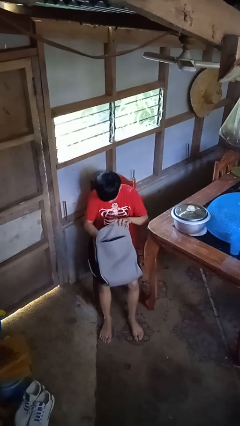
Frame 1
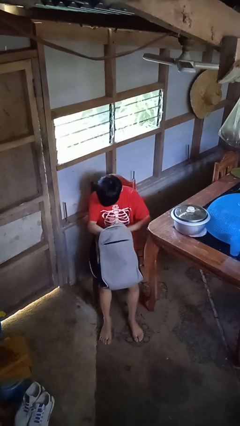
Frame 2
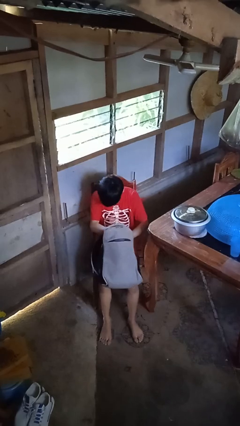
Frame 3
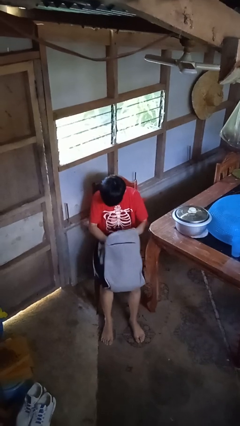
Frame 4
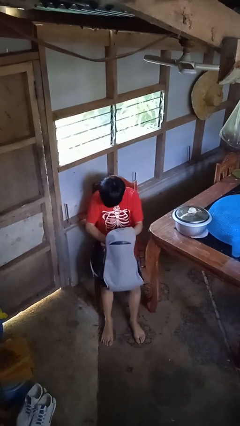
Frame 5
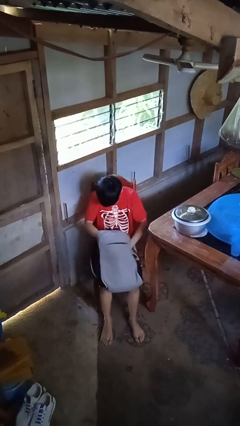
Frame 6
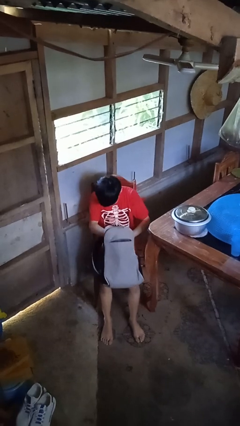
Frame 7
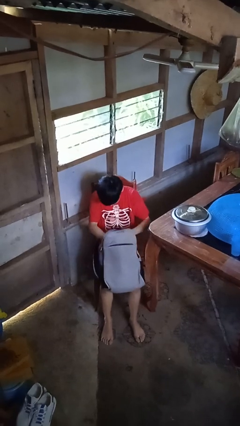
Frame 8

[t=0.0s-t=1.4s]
person searches in backpack

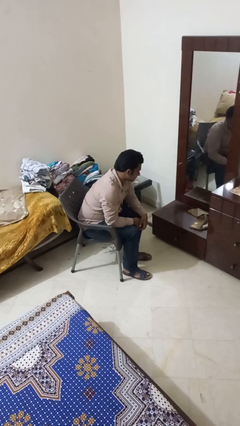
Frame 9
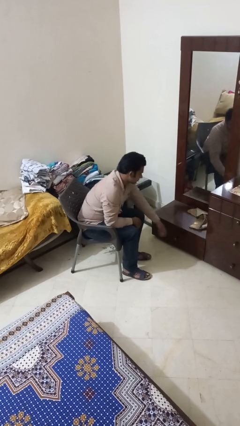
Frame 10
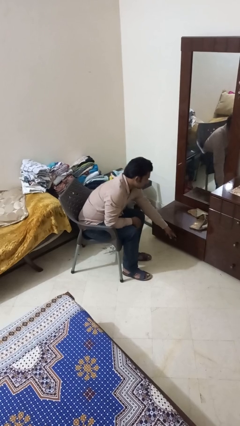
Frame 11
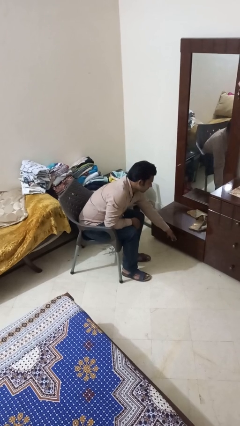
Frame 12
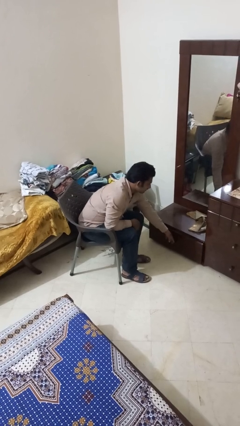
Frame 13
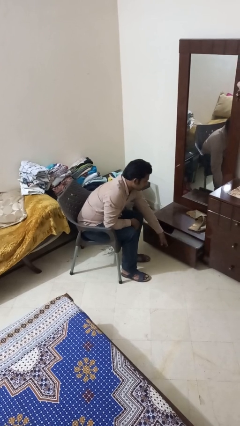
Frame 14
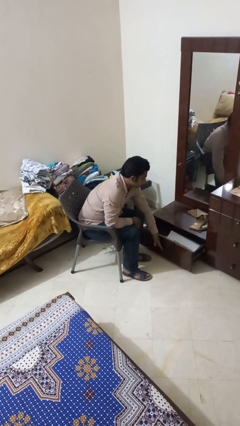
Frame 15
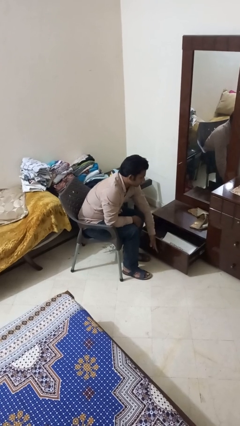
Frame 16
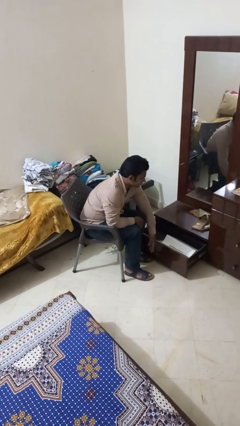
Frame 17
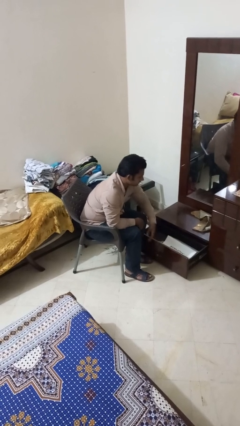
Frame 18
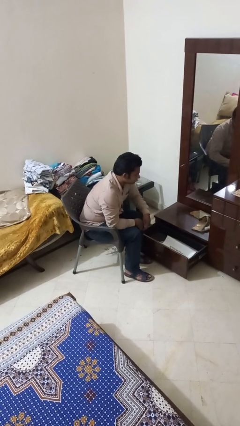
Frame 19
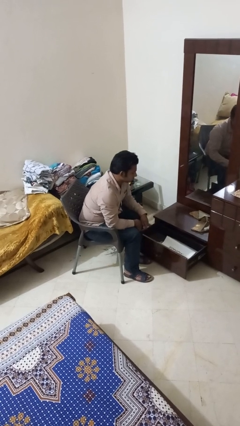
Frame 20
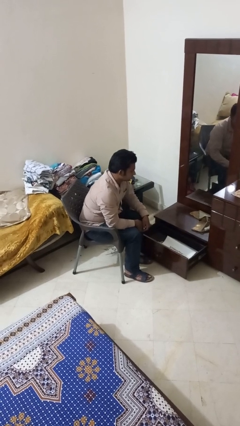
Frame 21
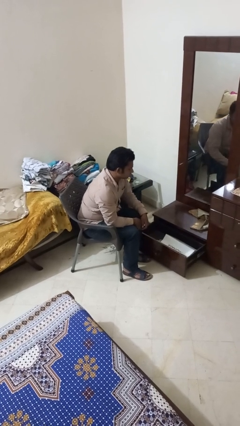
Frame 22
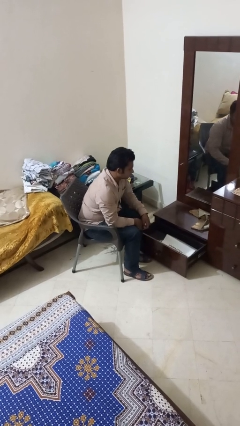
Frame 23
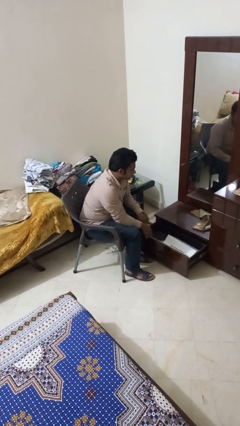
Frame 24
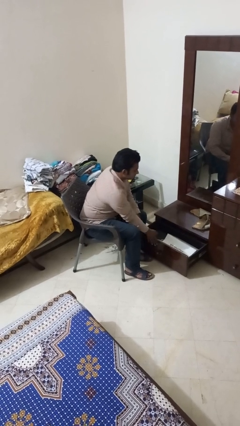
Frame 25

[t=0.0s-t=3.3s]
person opens closet door

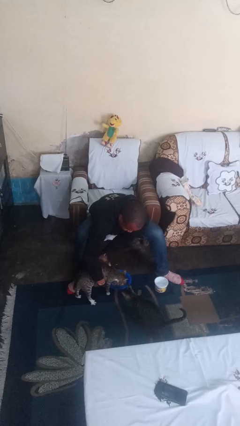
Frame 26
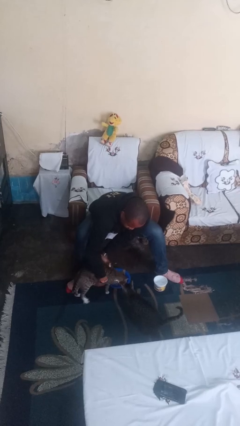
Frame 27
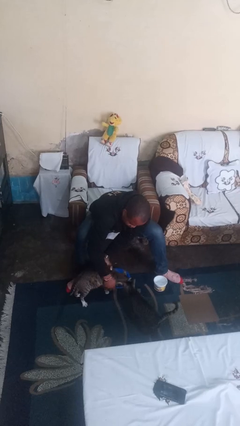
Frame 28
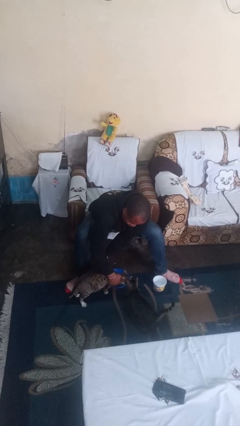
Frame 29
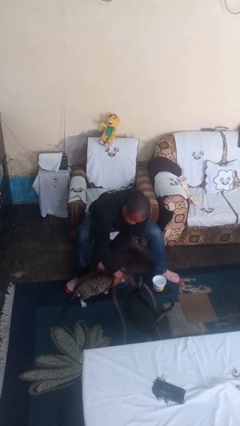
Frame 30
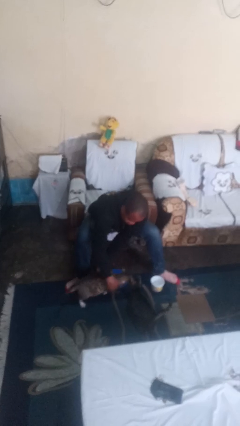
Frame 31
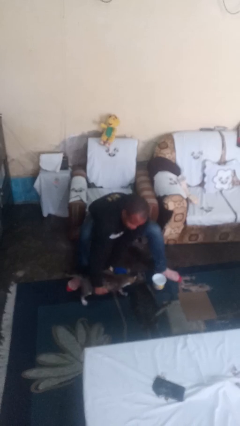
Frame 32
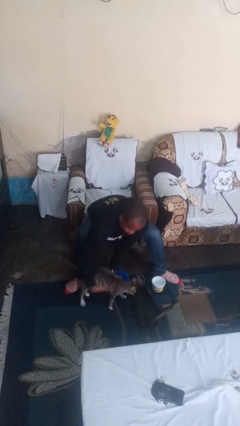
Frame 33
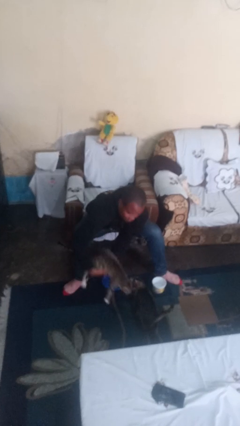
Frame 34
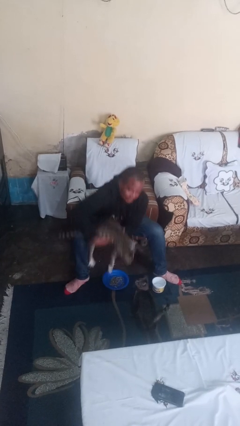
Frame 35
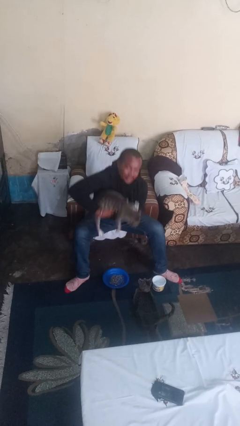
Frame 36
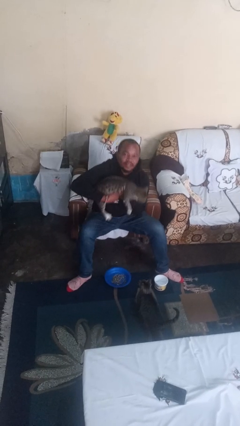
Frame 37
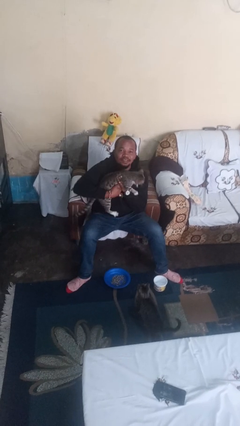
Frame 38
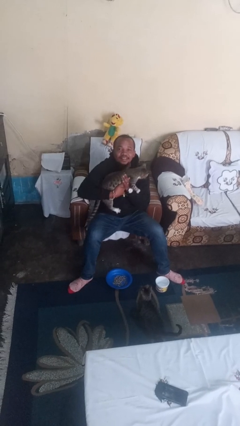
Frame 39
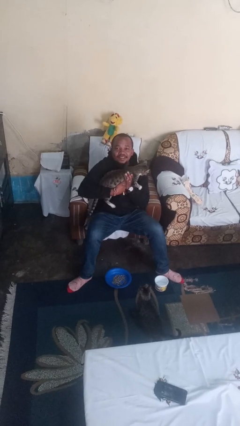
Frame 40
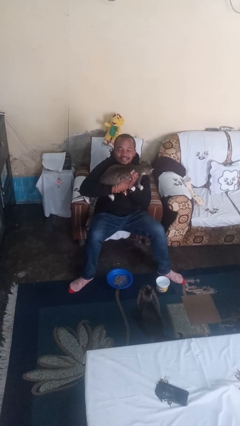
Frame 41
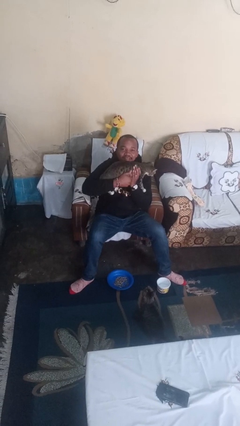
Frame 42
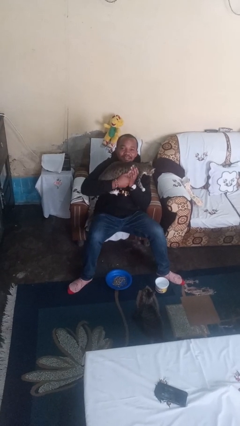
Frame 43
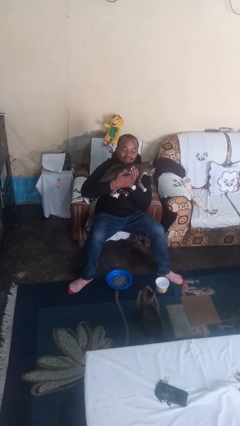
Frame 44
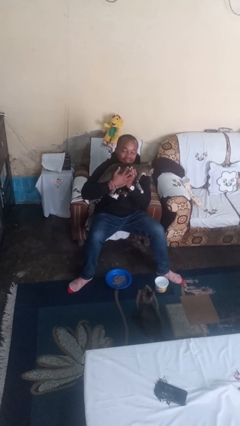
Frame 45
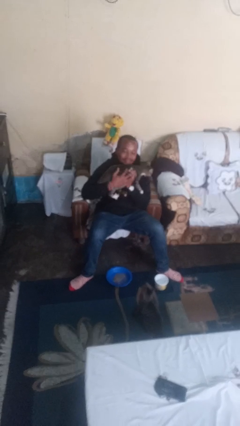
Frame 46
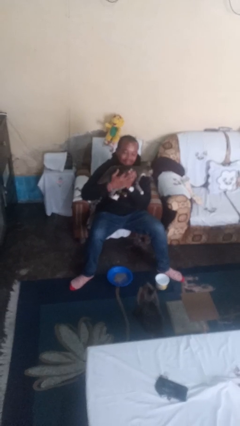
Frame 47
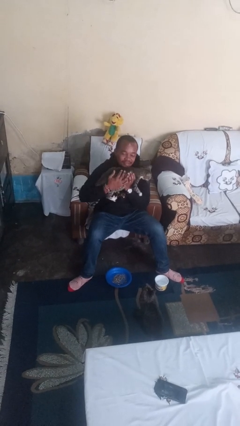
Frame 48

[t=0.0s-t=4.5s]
person hugs cat

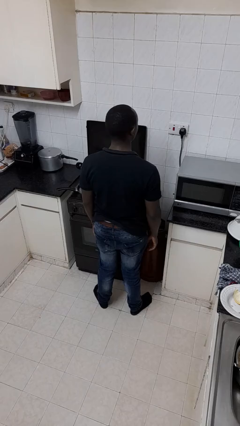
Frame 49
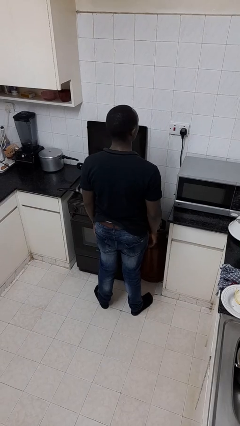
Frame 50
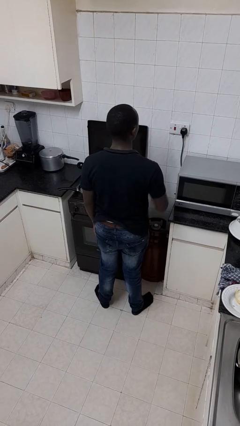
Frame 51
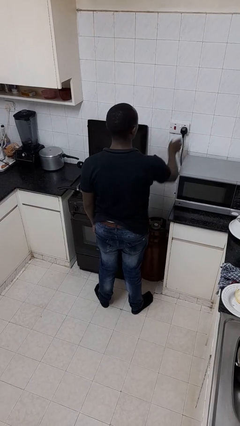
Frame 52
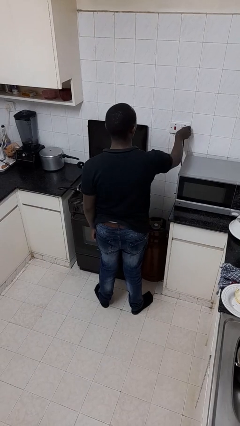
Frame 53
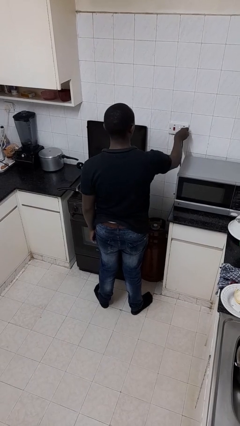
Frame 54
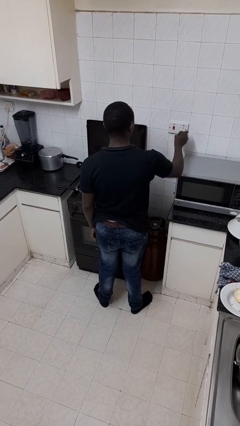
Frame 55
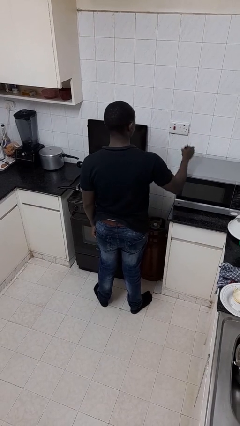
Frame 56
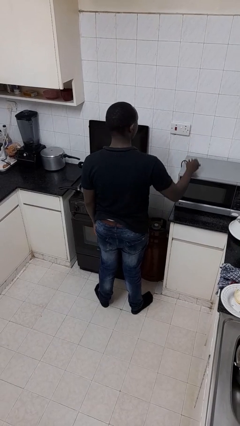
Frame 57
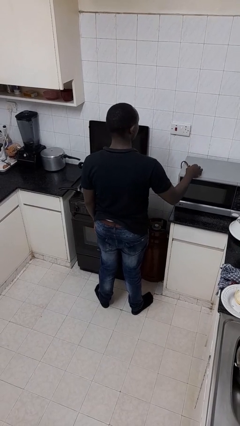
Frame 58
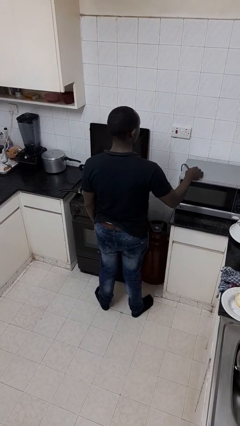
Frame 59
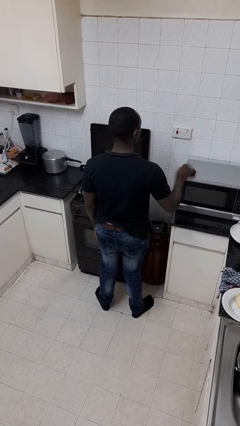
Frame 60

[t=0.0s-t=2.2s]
person unplugs from electrical socket

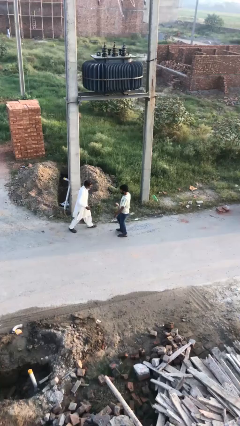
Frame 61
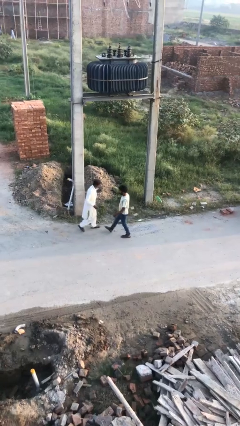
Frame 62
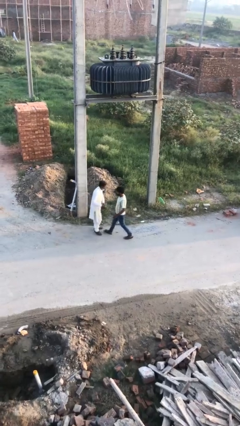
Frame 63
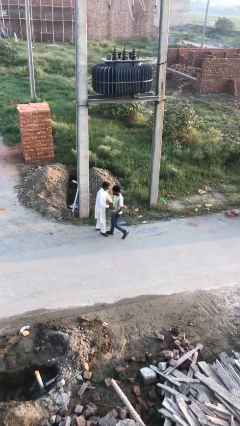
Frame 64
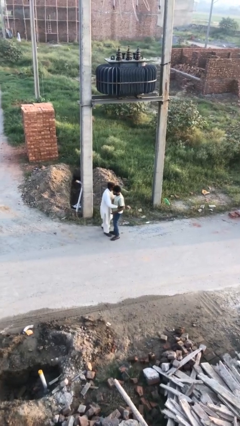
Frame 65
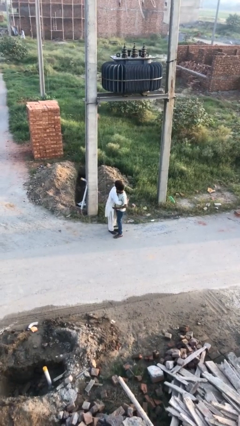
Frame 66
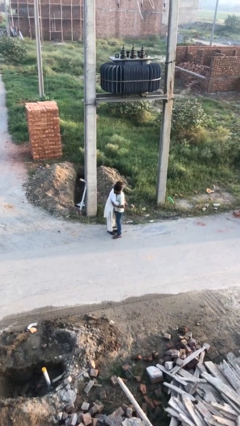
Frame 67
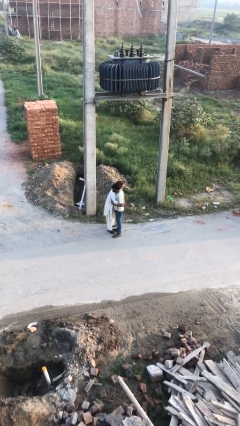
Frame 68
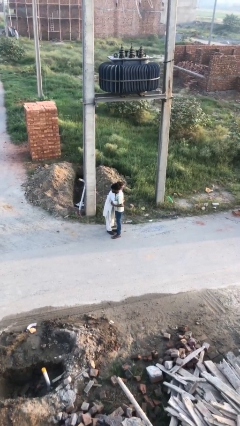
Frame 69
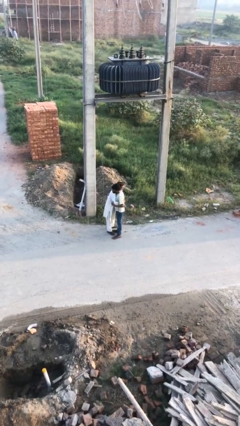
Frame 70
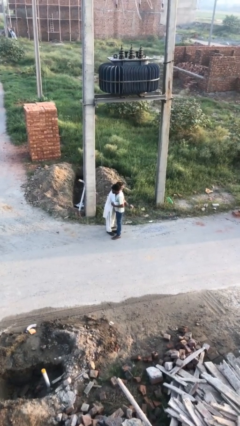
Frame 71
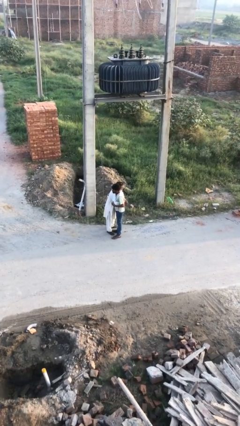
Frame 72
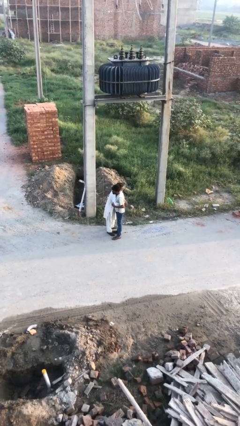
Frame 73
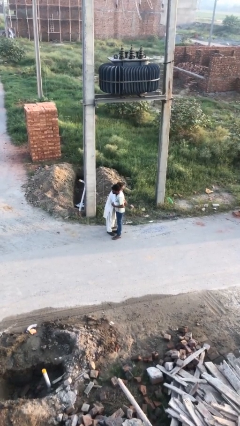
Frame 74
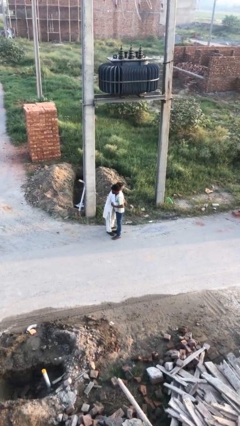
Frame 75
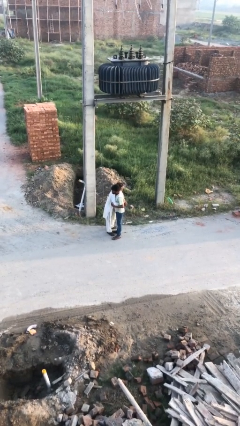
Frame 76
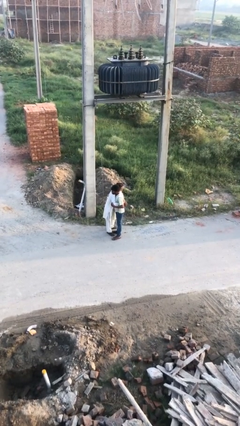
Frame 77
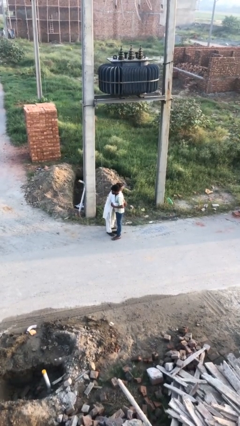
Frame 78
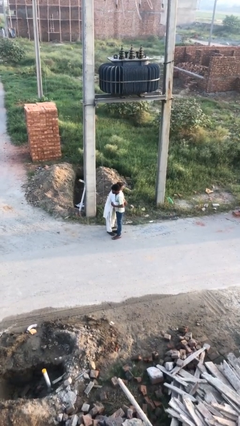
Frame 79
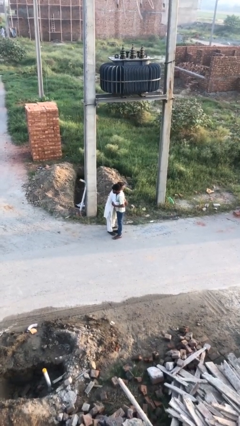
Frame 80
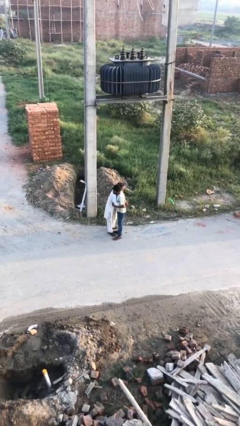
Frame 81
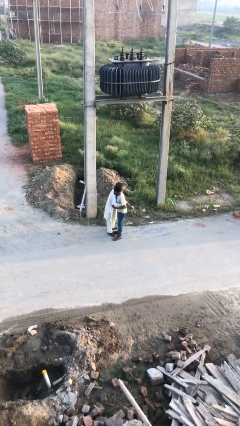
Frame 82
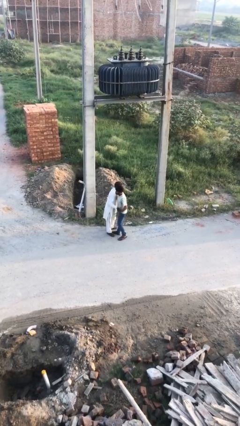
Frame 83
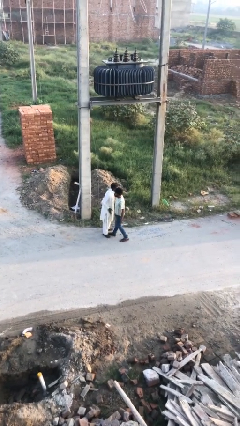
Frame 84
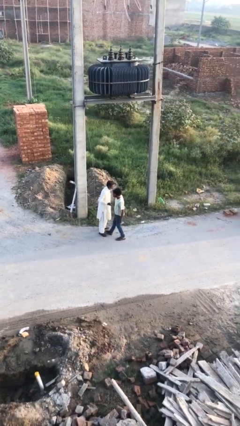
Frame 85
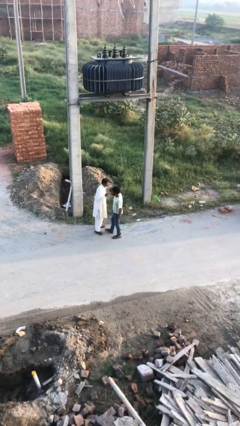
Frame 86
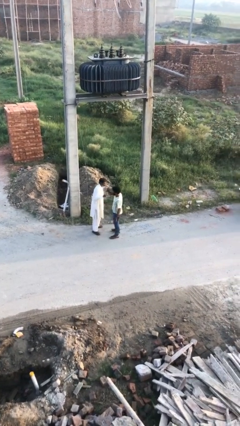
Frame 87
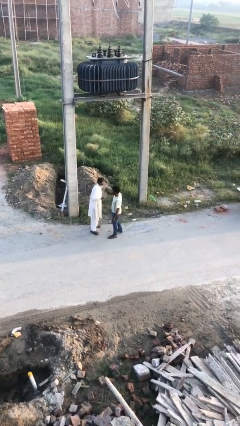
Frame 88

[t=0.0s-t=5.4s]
person embraces person

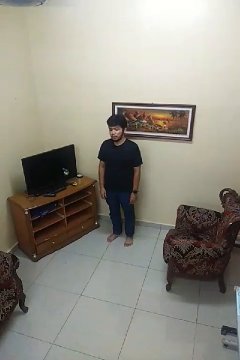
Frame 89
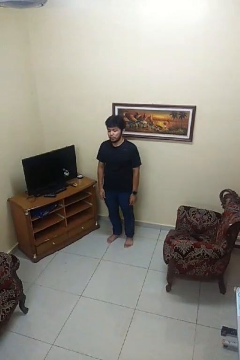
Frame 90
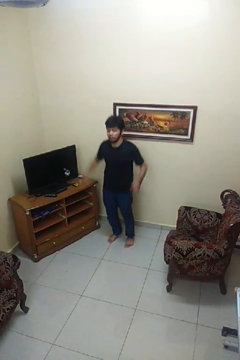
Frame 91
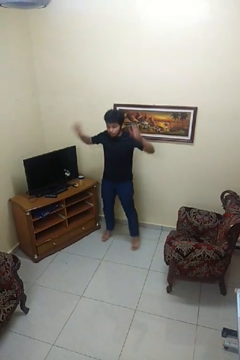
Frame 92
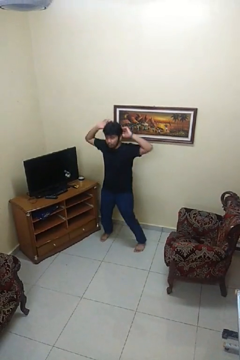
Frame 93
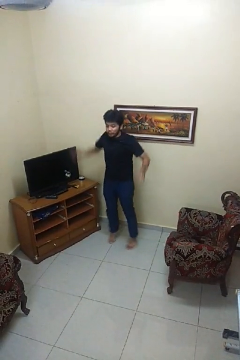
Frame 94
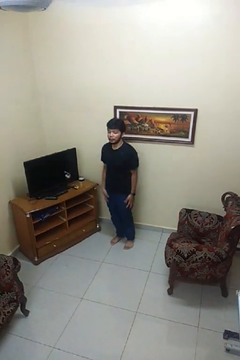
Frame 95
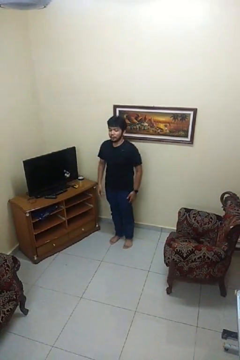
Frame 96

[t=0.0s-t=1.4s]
person exercises with jumping jacks
